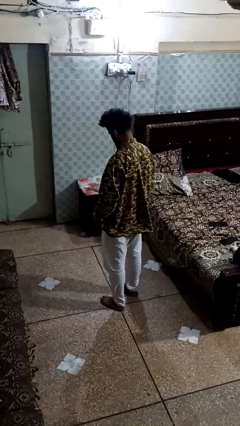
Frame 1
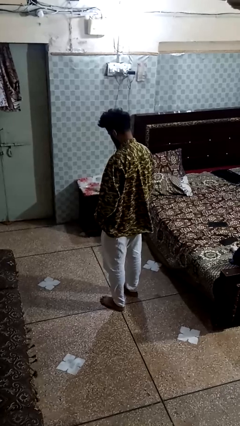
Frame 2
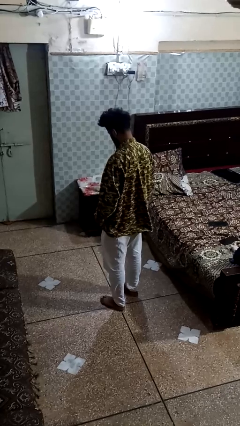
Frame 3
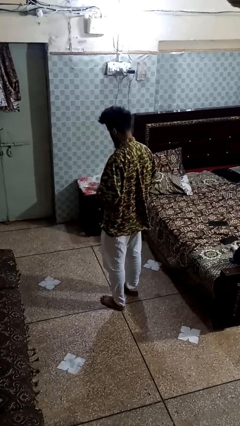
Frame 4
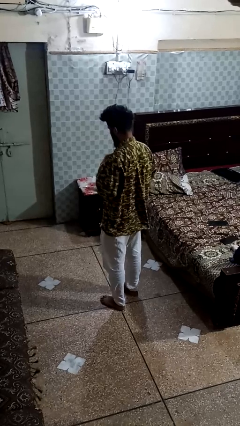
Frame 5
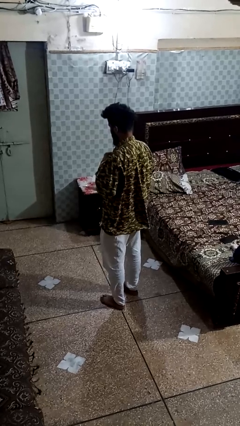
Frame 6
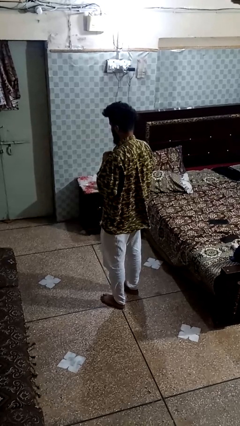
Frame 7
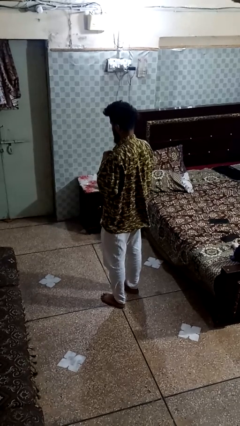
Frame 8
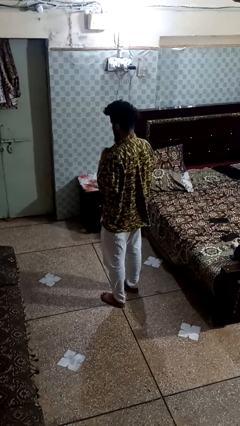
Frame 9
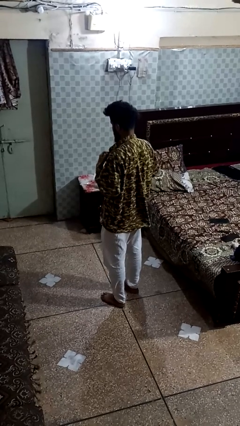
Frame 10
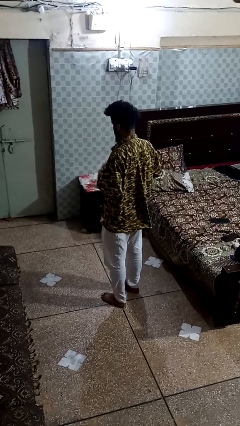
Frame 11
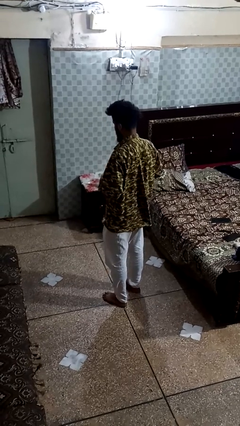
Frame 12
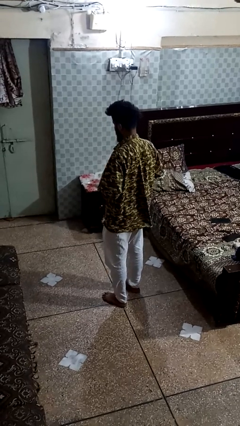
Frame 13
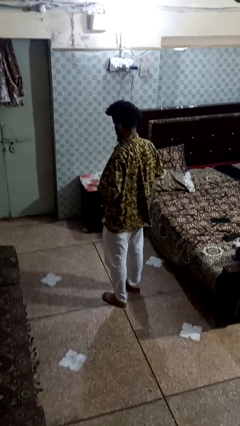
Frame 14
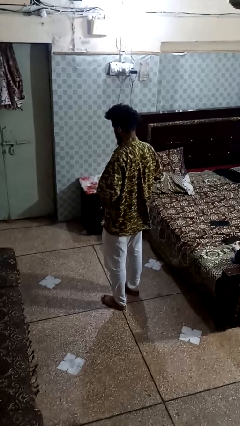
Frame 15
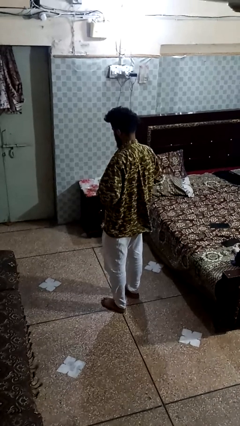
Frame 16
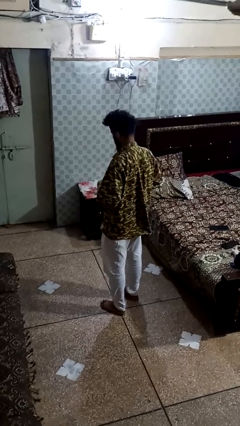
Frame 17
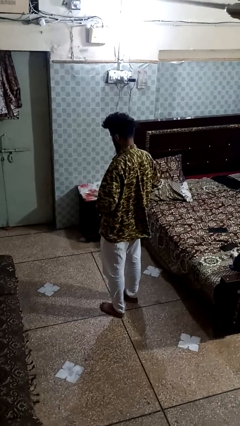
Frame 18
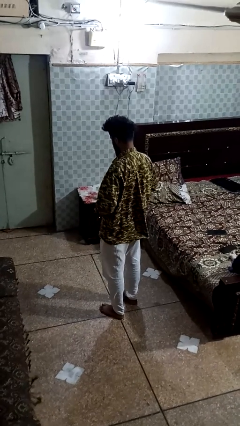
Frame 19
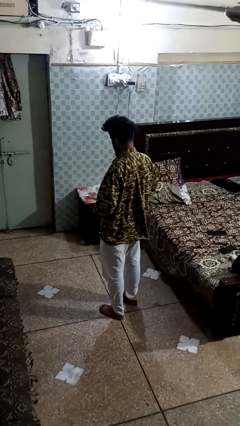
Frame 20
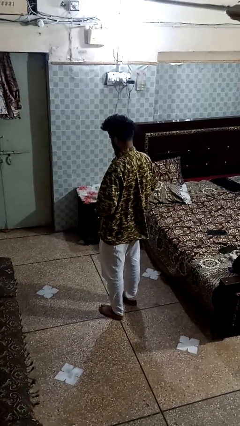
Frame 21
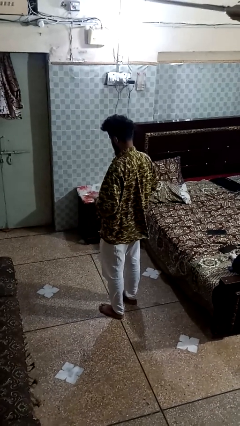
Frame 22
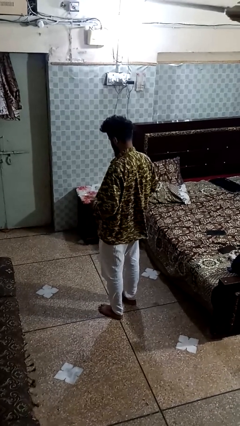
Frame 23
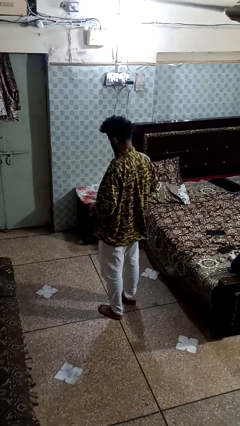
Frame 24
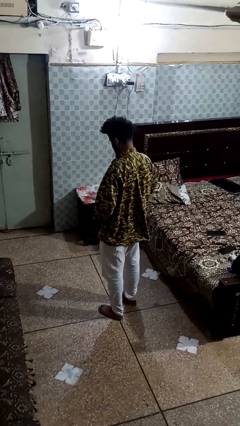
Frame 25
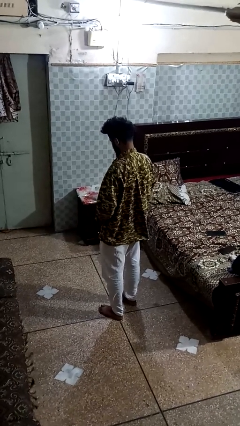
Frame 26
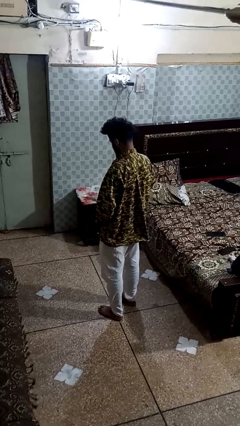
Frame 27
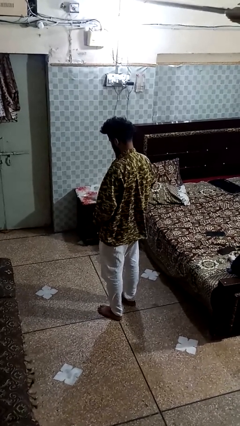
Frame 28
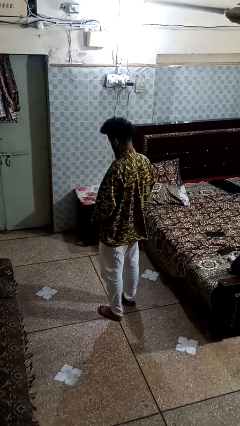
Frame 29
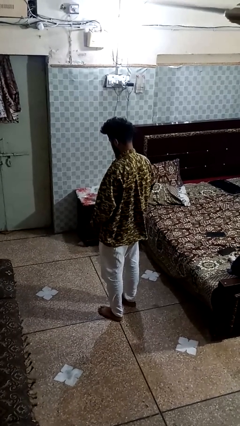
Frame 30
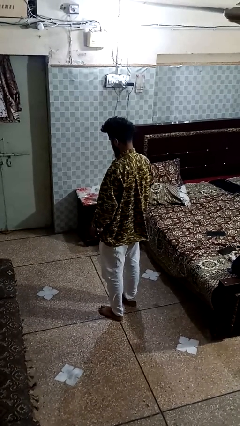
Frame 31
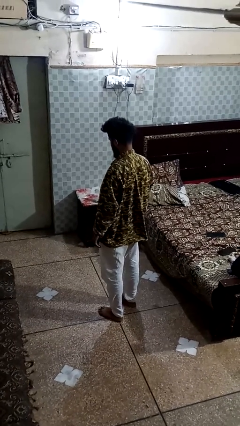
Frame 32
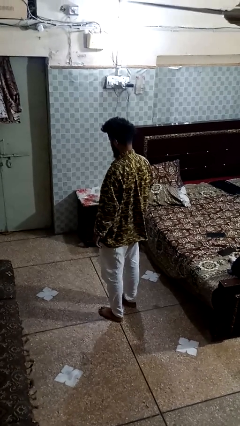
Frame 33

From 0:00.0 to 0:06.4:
person unbuttons shirt

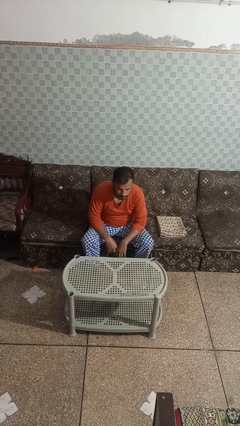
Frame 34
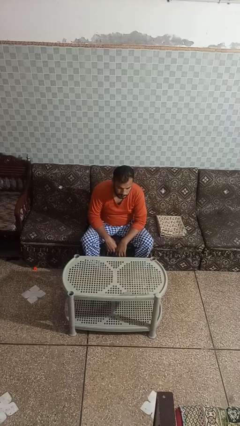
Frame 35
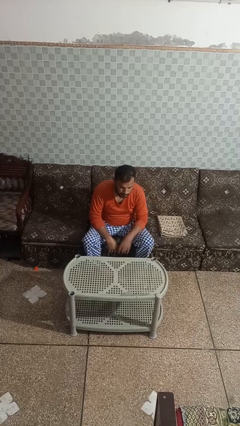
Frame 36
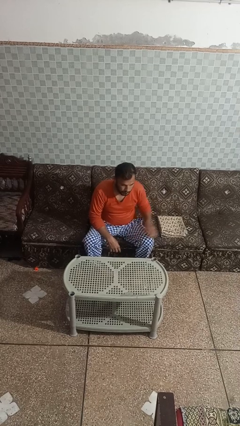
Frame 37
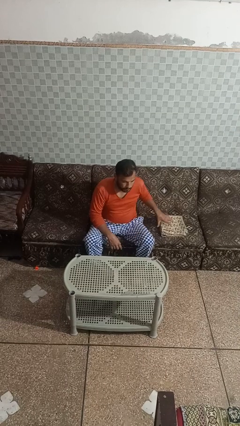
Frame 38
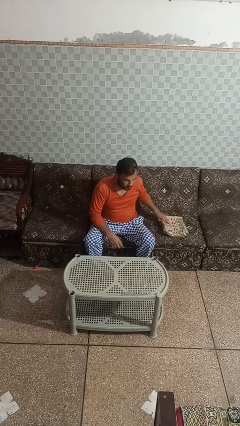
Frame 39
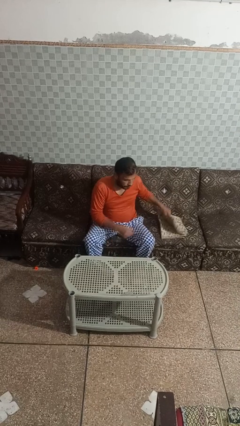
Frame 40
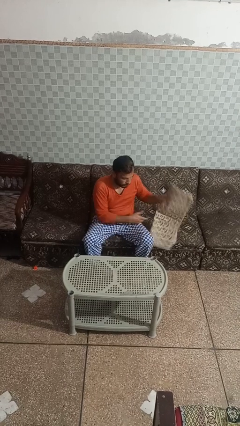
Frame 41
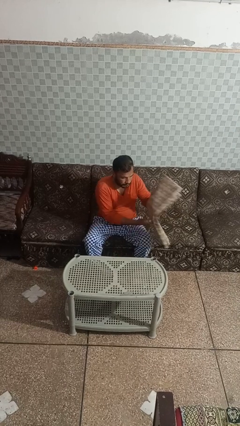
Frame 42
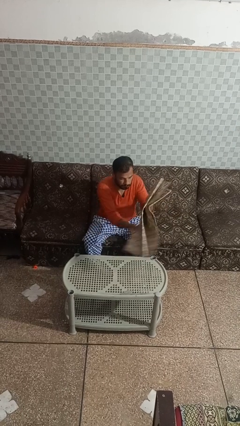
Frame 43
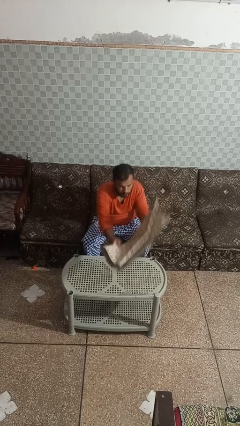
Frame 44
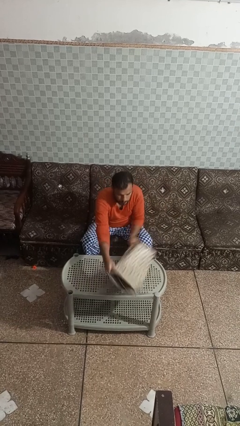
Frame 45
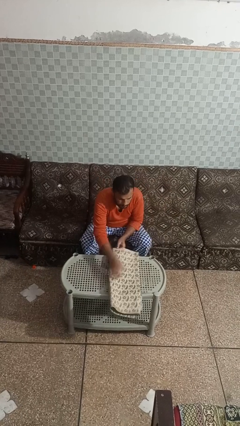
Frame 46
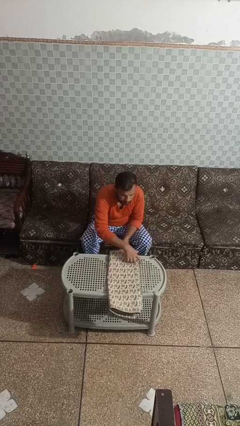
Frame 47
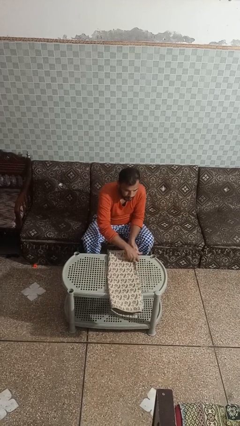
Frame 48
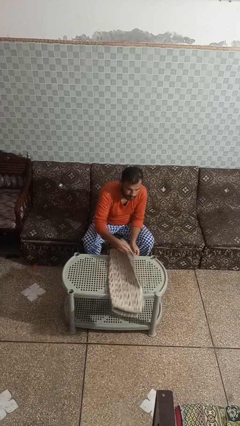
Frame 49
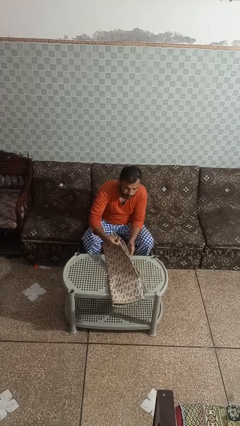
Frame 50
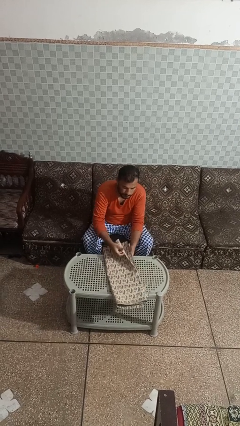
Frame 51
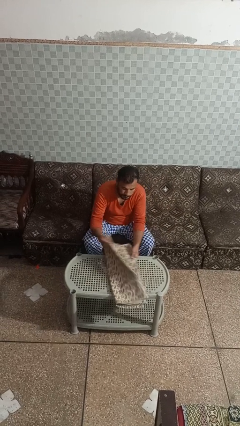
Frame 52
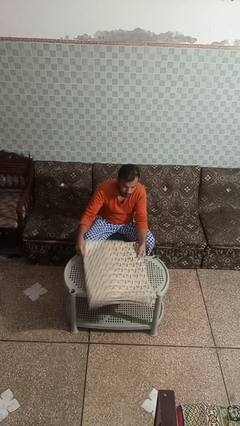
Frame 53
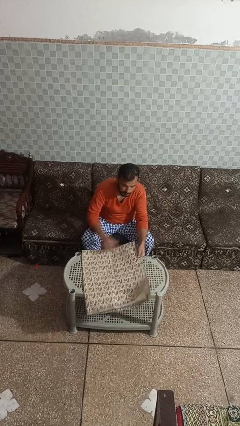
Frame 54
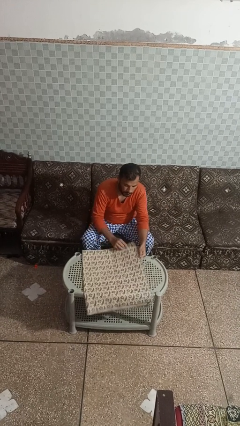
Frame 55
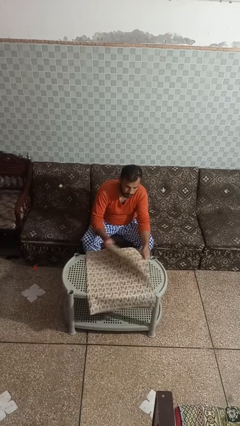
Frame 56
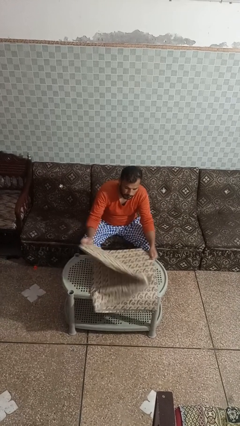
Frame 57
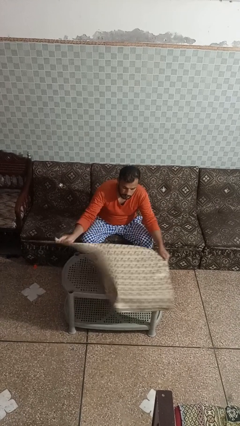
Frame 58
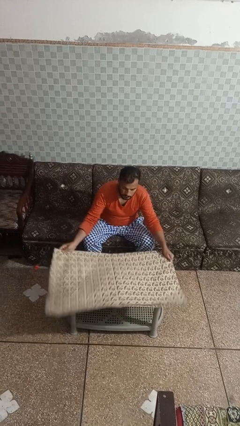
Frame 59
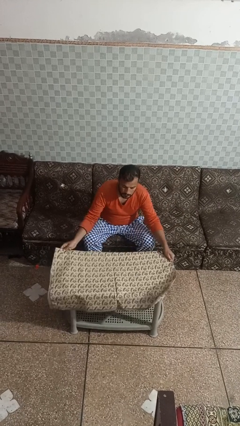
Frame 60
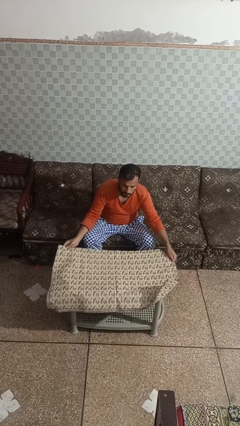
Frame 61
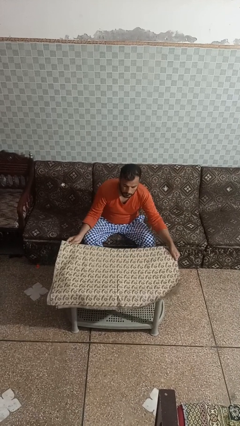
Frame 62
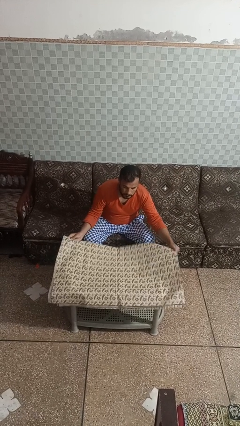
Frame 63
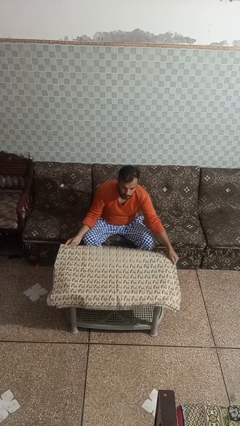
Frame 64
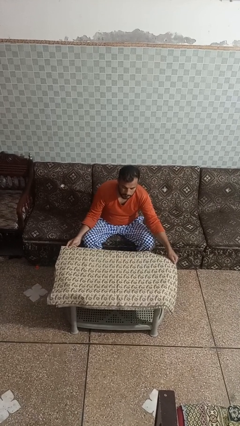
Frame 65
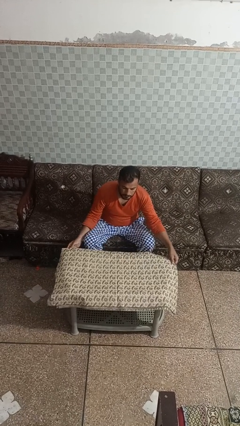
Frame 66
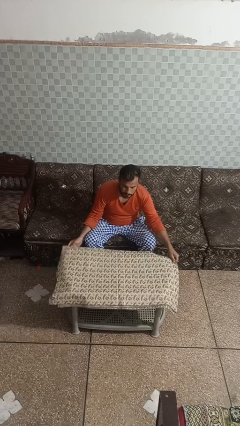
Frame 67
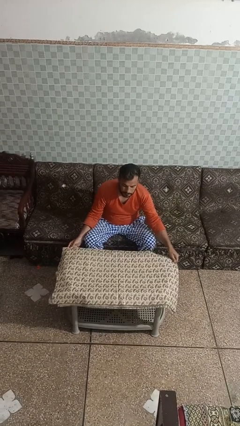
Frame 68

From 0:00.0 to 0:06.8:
person spreads tablecloth

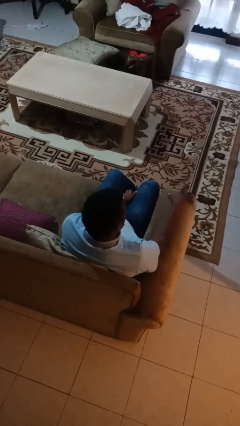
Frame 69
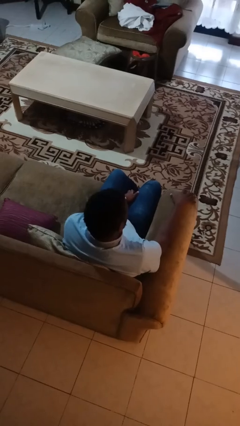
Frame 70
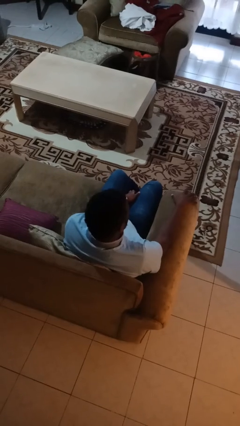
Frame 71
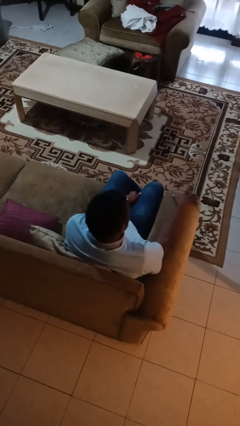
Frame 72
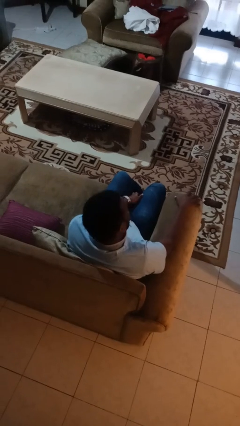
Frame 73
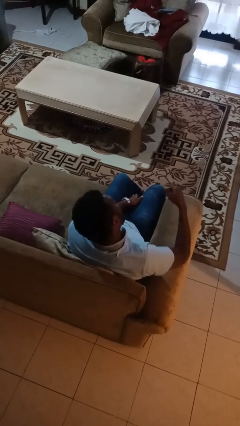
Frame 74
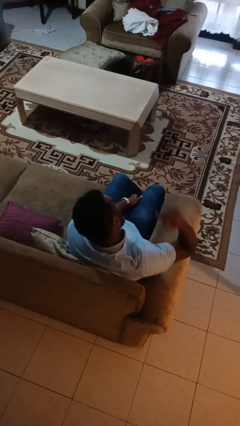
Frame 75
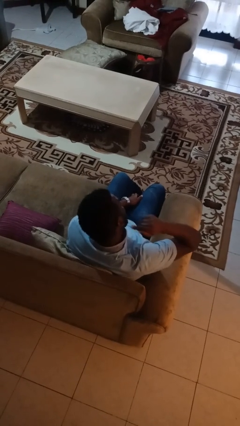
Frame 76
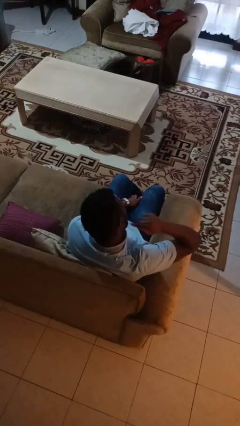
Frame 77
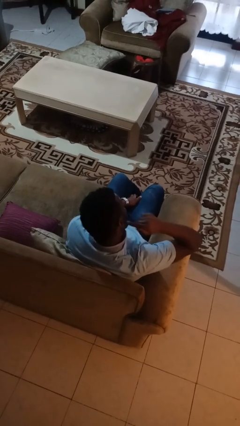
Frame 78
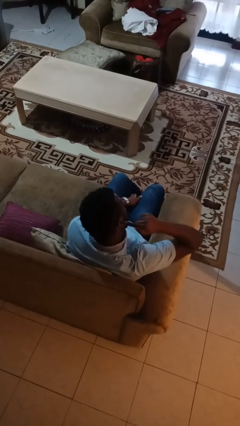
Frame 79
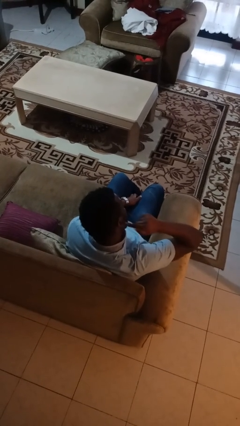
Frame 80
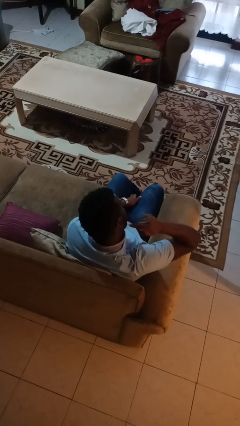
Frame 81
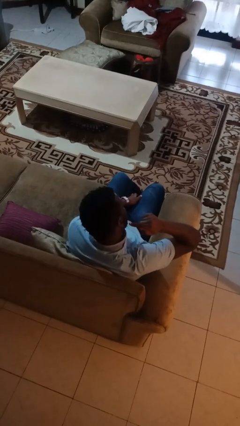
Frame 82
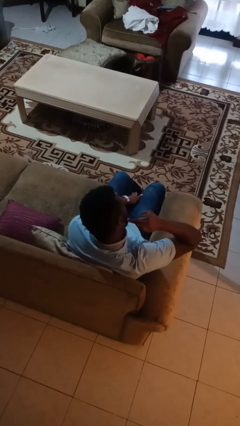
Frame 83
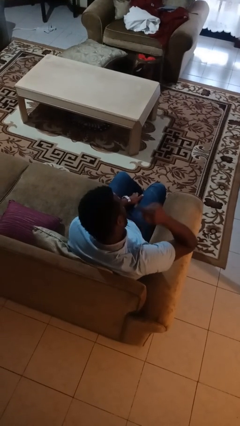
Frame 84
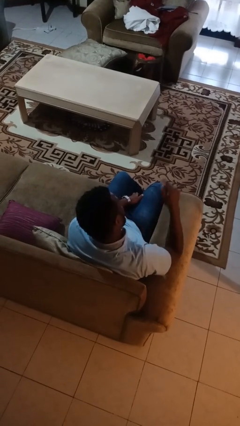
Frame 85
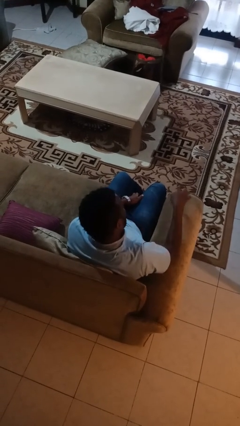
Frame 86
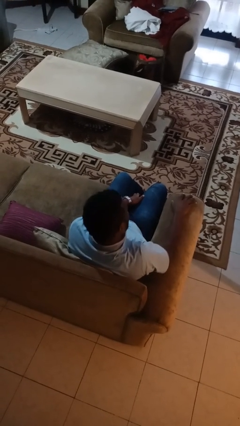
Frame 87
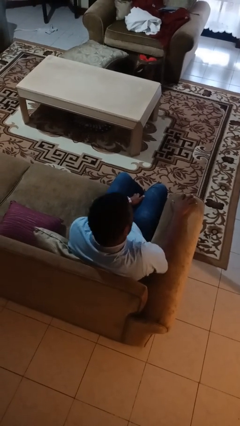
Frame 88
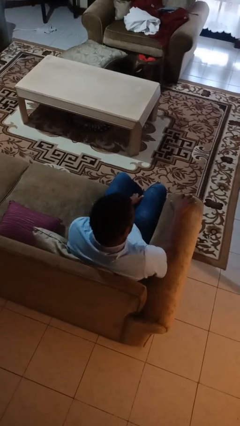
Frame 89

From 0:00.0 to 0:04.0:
person gestures listen closely

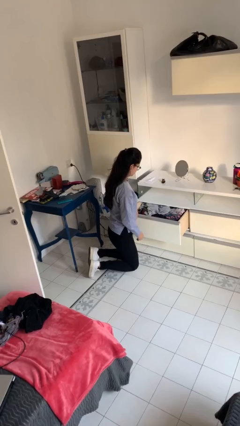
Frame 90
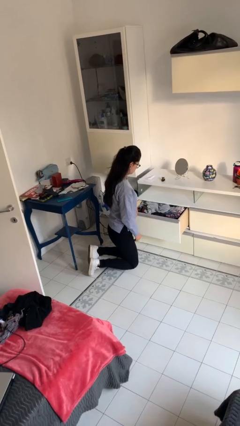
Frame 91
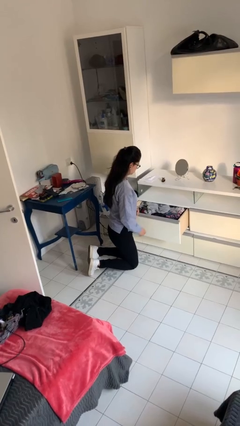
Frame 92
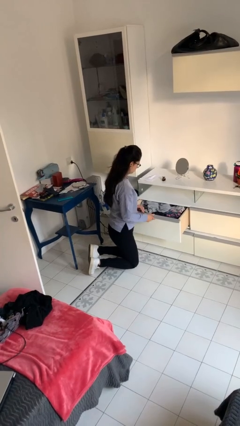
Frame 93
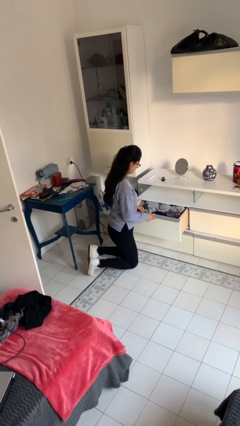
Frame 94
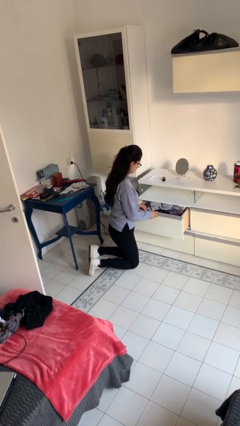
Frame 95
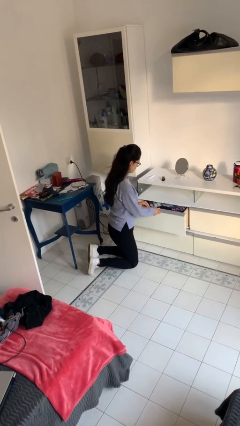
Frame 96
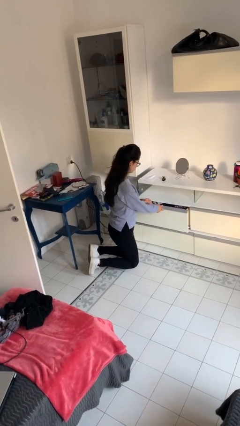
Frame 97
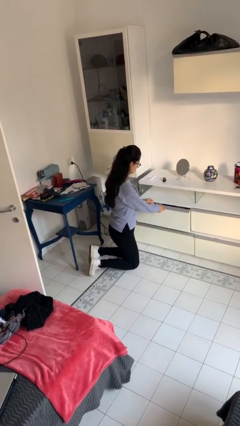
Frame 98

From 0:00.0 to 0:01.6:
person closes dresser drawer
